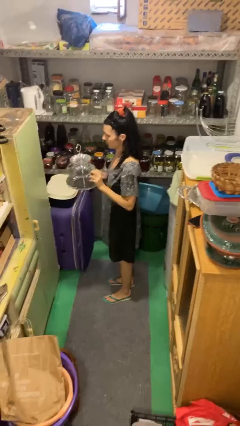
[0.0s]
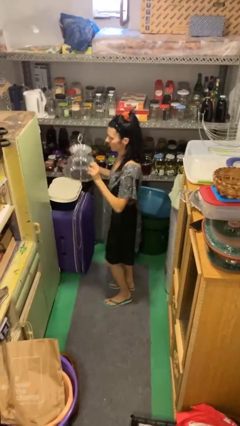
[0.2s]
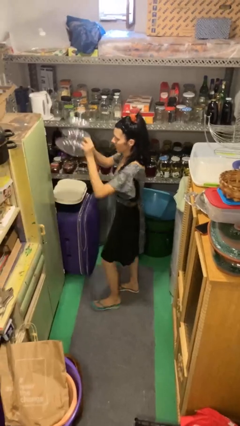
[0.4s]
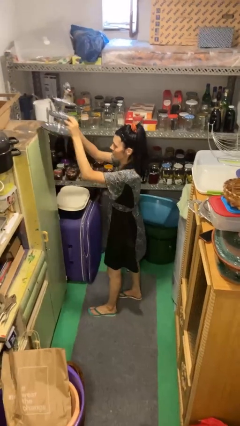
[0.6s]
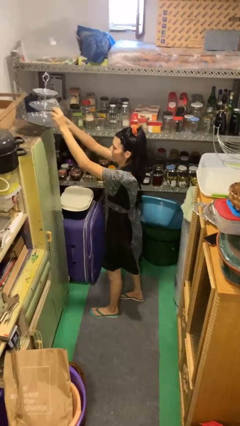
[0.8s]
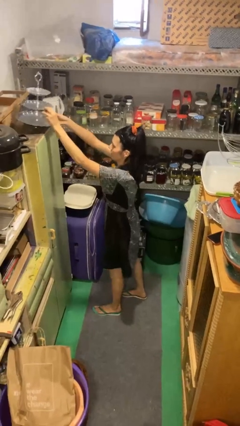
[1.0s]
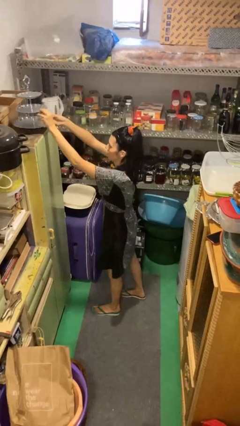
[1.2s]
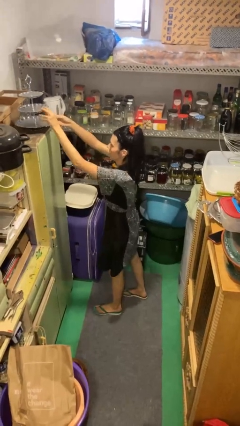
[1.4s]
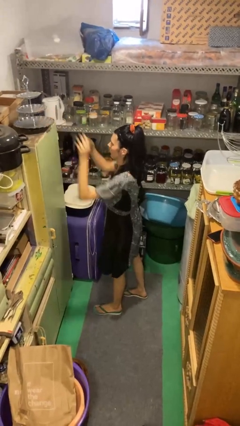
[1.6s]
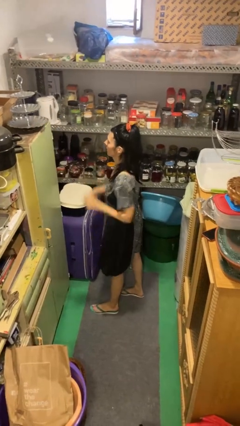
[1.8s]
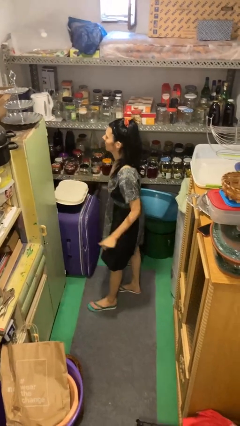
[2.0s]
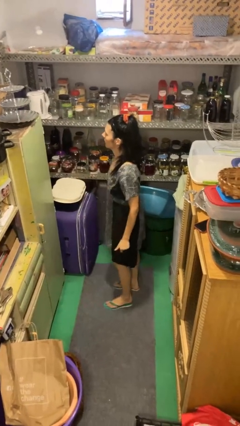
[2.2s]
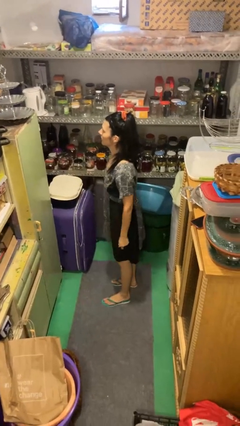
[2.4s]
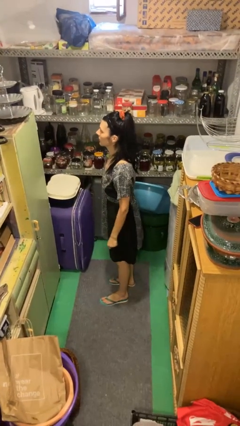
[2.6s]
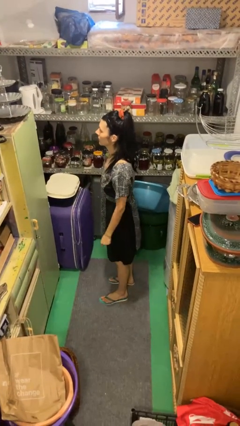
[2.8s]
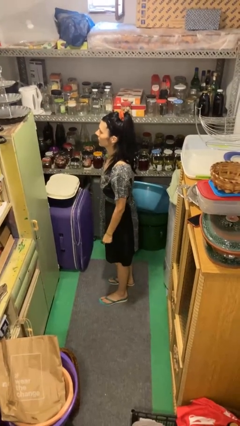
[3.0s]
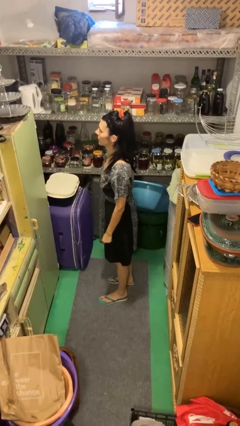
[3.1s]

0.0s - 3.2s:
person puts down object on countertop

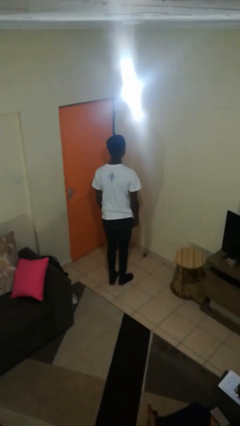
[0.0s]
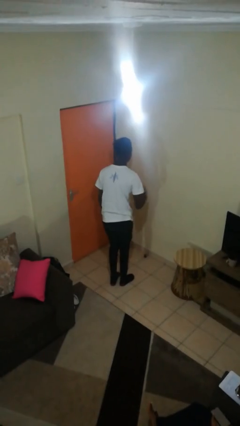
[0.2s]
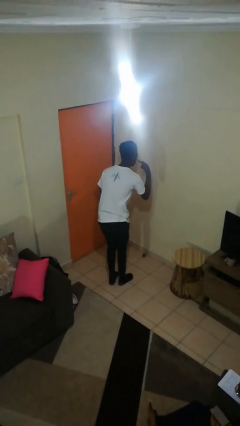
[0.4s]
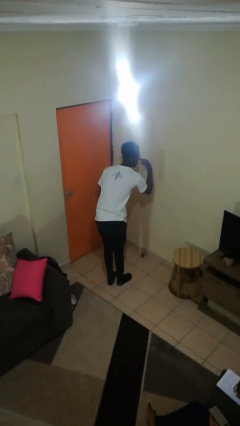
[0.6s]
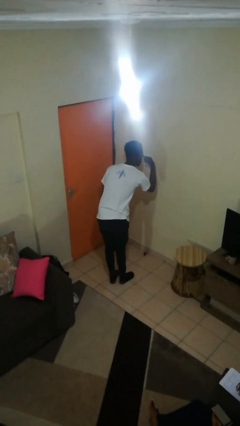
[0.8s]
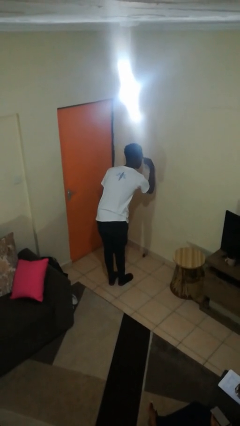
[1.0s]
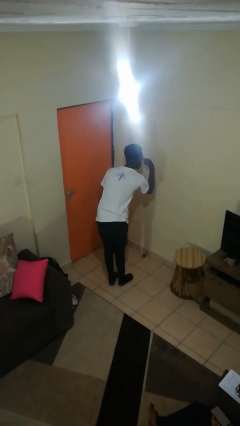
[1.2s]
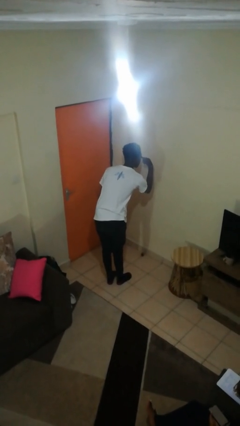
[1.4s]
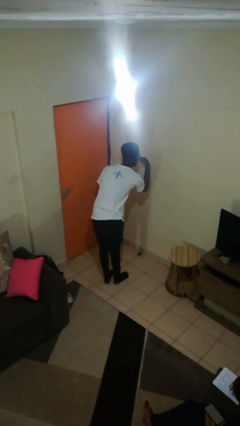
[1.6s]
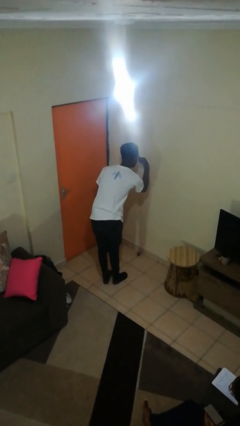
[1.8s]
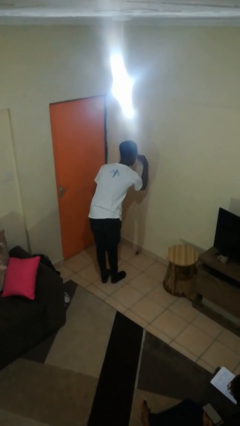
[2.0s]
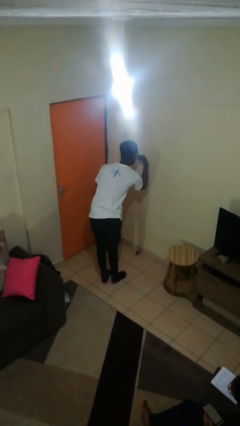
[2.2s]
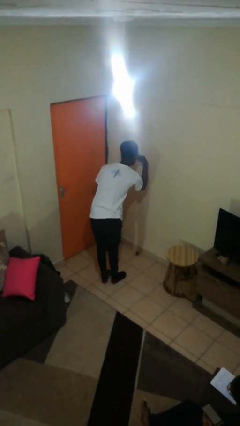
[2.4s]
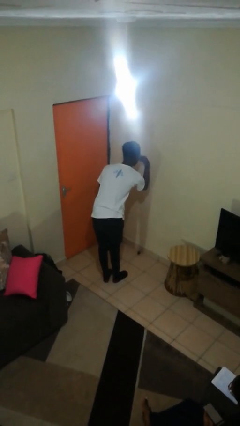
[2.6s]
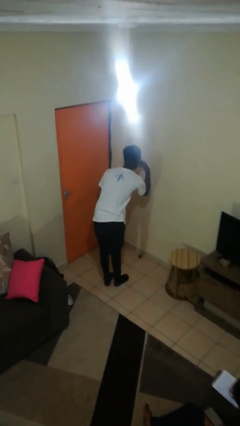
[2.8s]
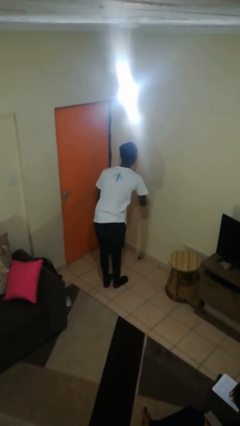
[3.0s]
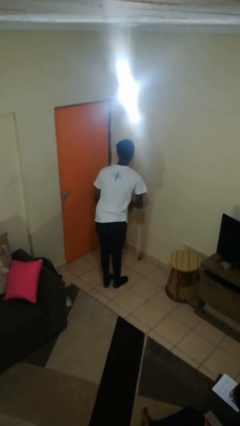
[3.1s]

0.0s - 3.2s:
person gestures watch closely

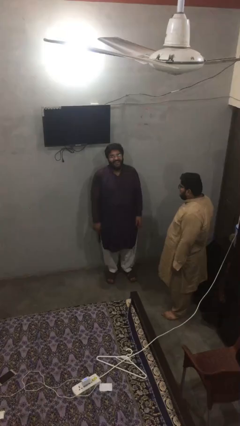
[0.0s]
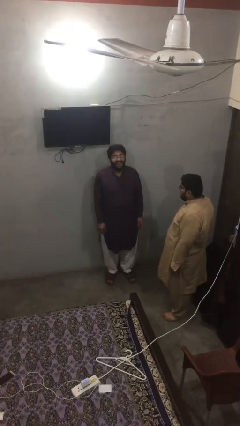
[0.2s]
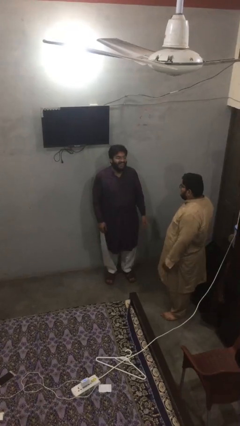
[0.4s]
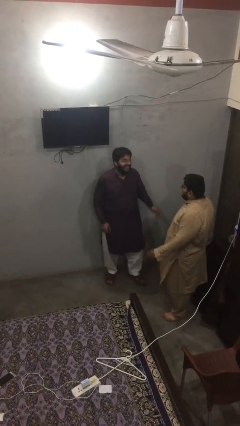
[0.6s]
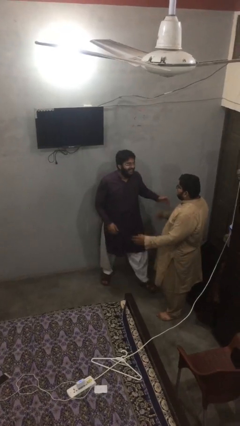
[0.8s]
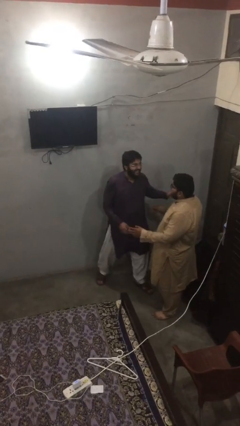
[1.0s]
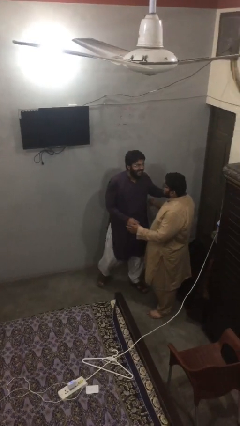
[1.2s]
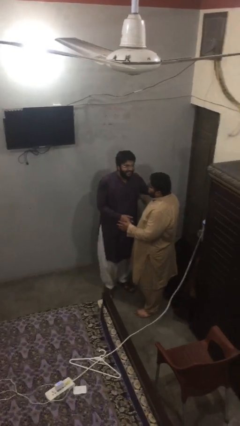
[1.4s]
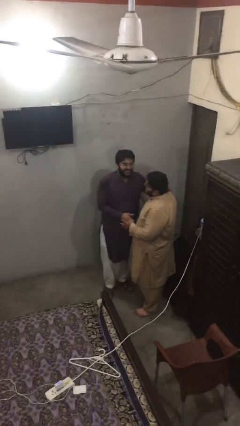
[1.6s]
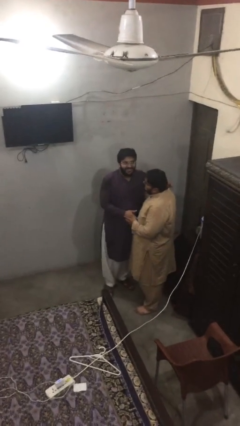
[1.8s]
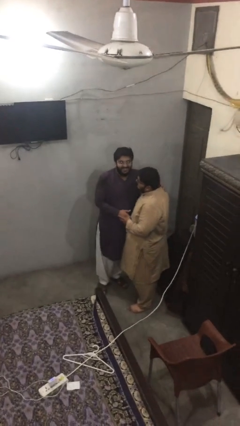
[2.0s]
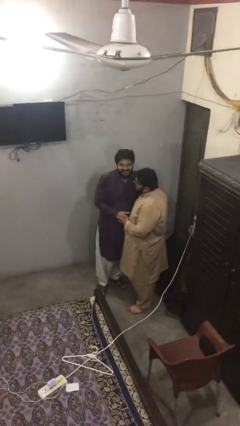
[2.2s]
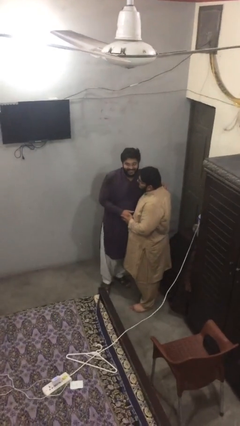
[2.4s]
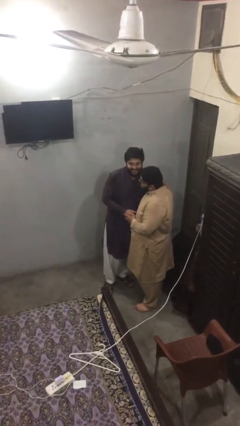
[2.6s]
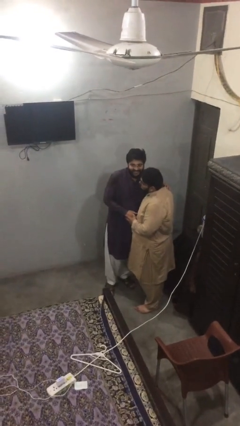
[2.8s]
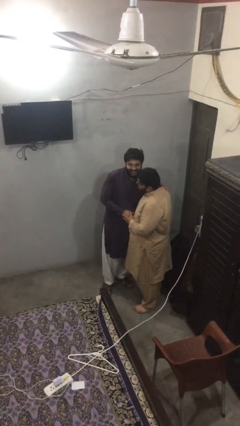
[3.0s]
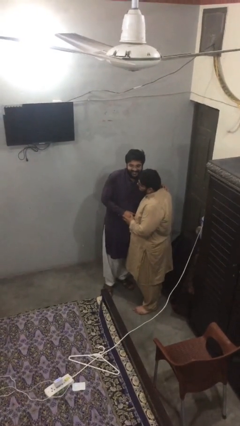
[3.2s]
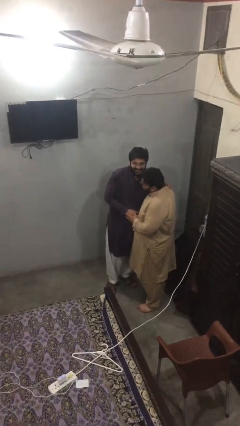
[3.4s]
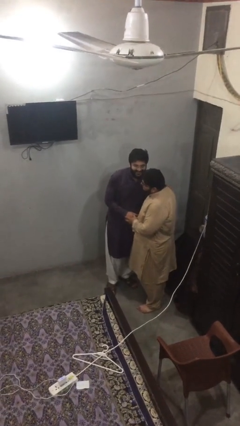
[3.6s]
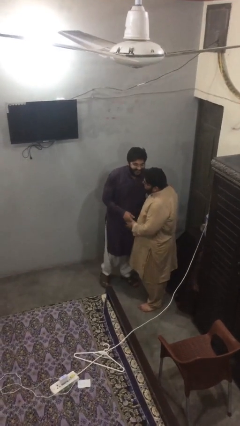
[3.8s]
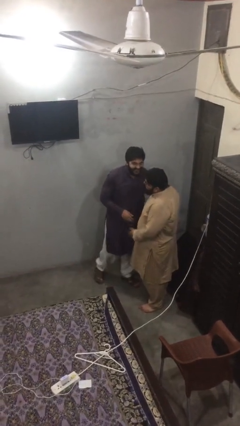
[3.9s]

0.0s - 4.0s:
person embraces person

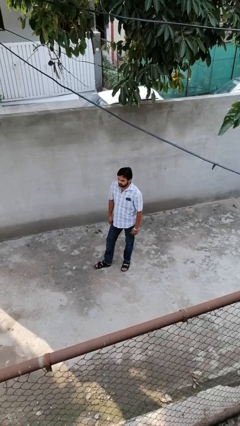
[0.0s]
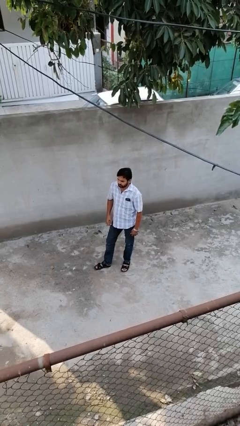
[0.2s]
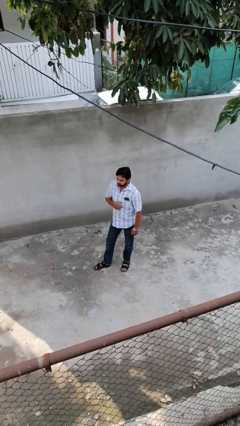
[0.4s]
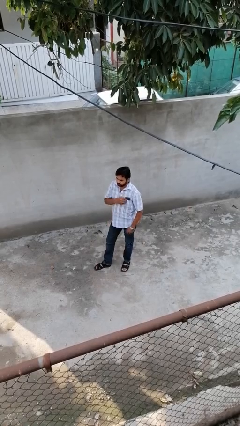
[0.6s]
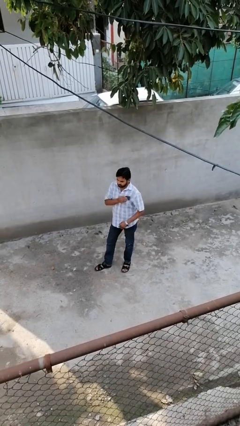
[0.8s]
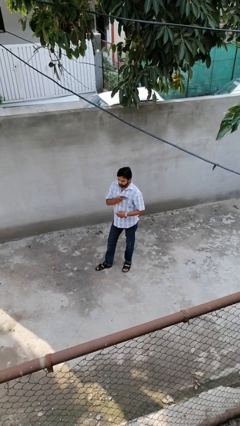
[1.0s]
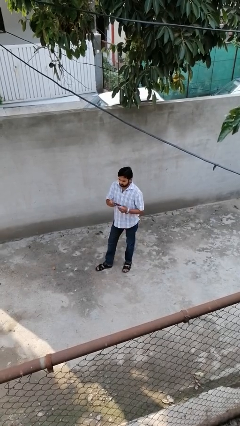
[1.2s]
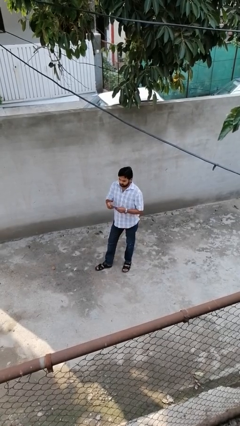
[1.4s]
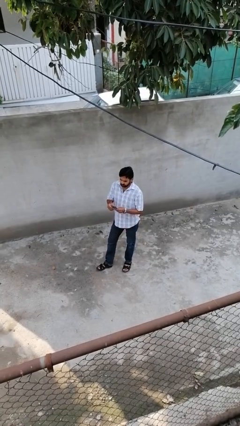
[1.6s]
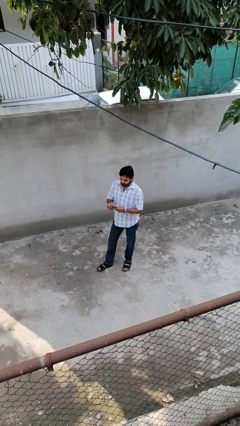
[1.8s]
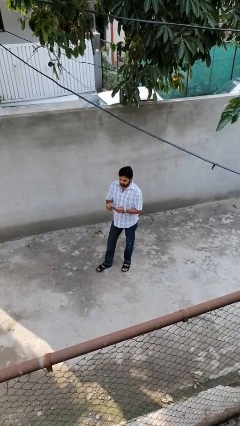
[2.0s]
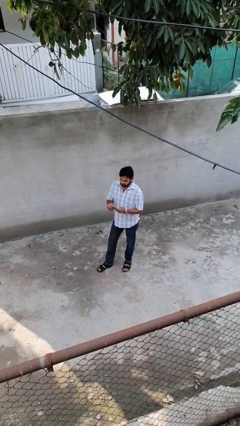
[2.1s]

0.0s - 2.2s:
person takes phone from pocket

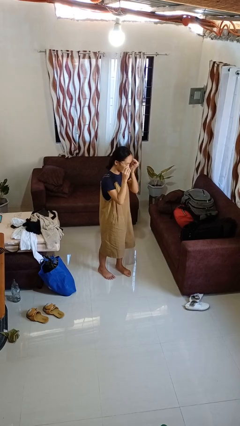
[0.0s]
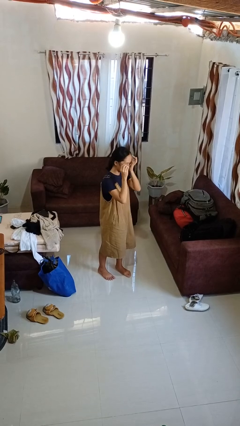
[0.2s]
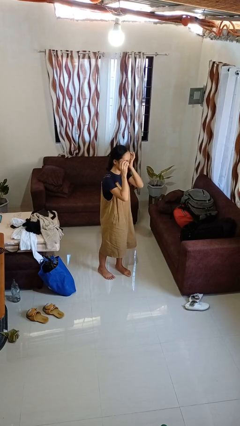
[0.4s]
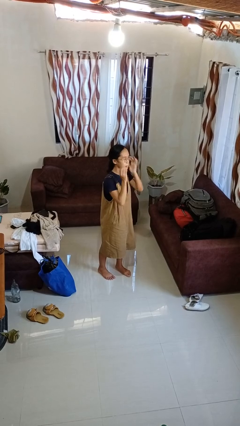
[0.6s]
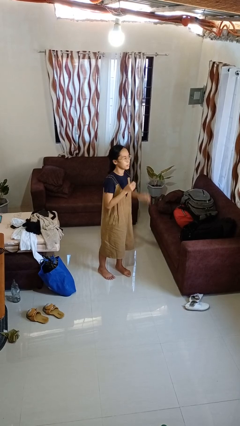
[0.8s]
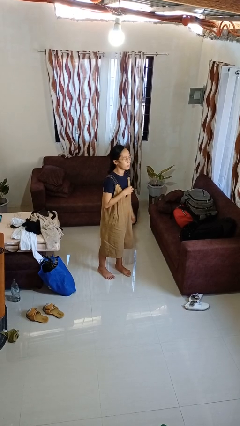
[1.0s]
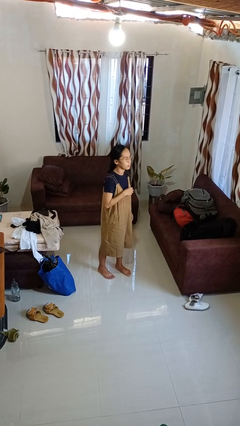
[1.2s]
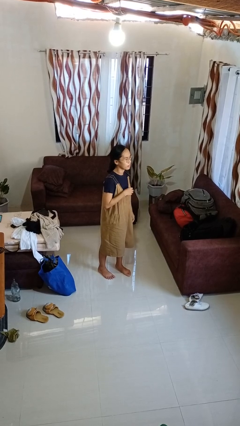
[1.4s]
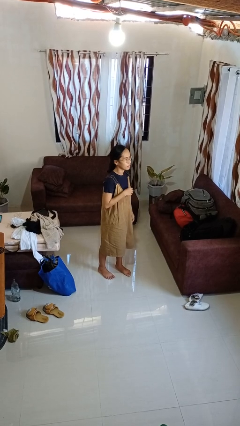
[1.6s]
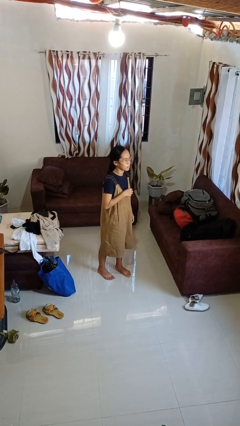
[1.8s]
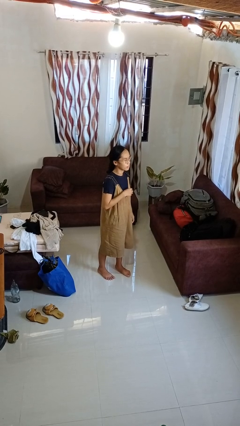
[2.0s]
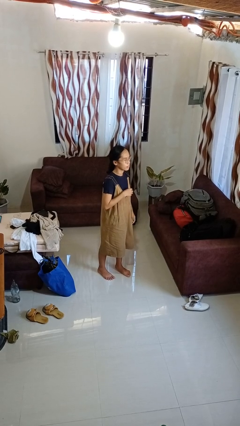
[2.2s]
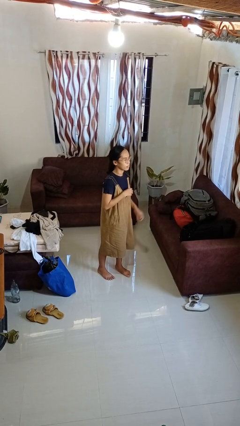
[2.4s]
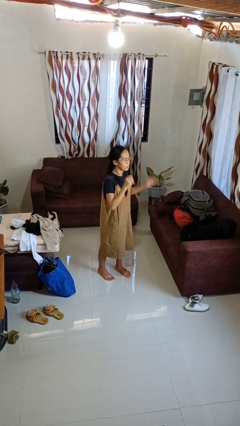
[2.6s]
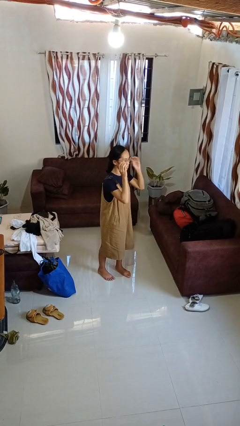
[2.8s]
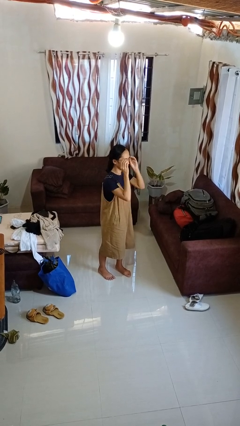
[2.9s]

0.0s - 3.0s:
person puts on glasses

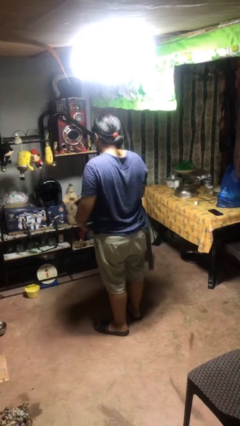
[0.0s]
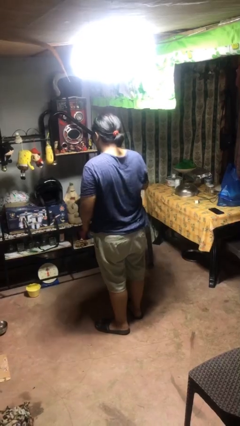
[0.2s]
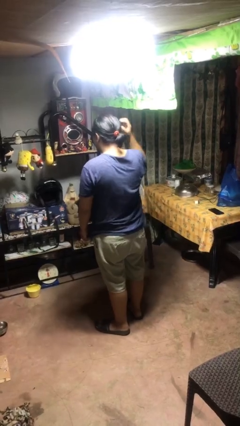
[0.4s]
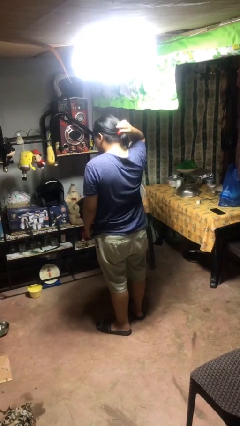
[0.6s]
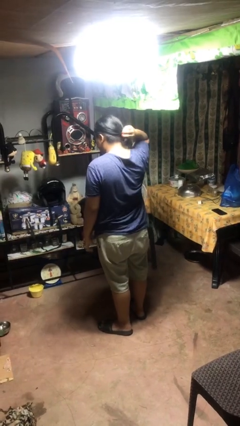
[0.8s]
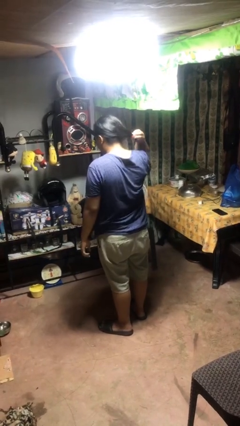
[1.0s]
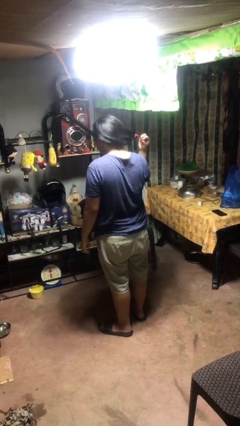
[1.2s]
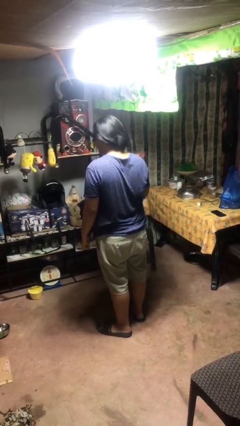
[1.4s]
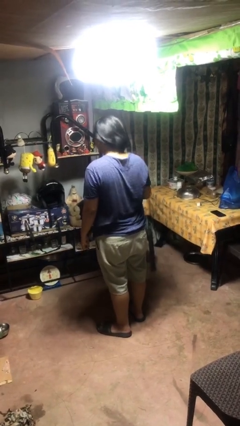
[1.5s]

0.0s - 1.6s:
person takes off hairtie
